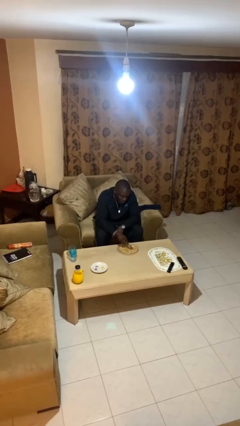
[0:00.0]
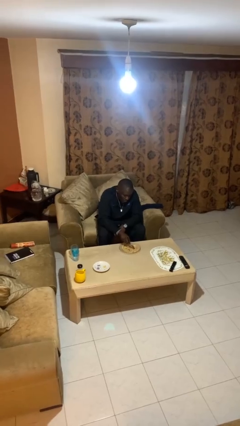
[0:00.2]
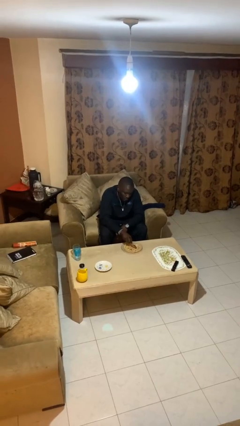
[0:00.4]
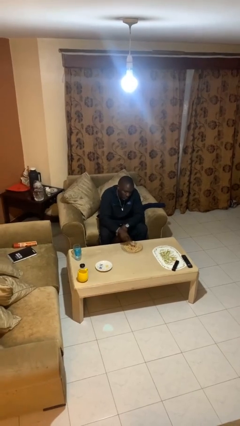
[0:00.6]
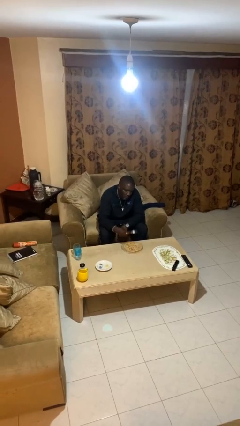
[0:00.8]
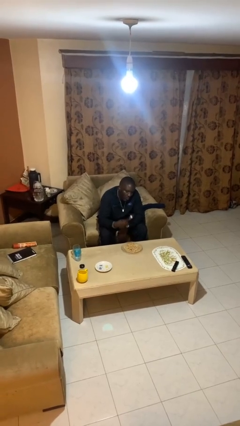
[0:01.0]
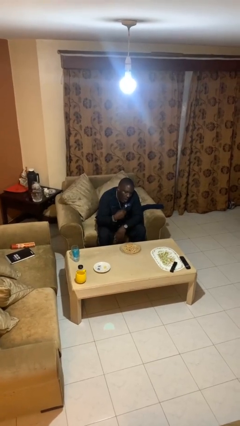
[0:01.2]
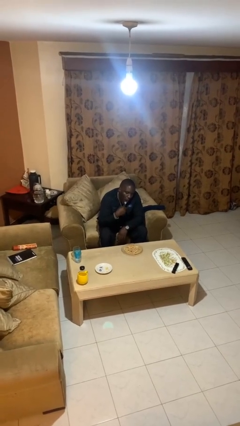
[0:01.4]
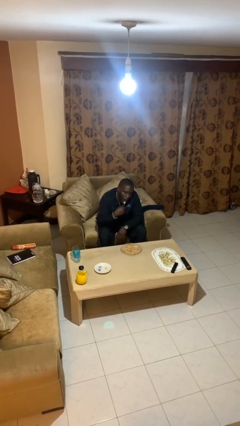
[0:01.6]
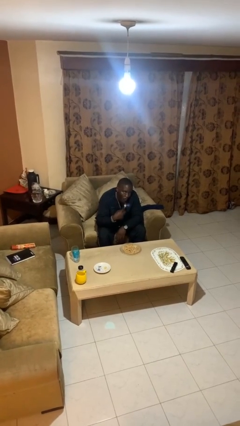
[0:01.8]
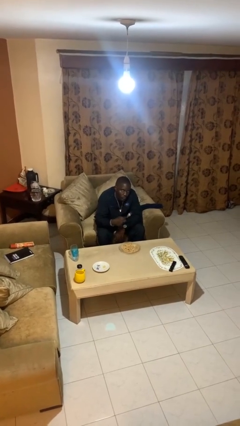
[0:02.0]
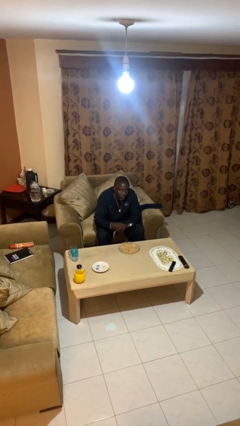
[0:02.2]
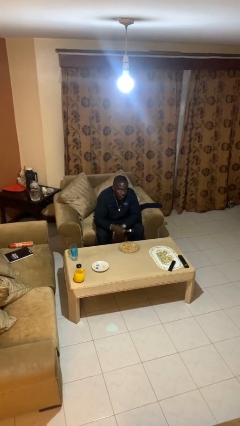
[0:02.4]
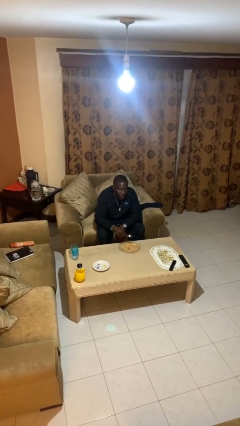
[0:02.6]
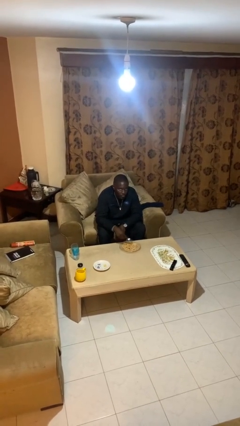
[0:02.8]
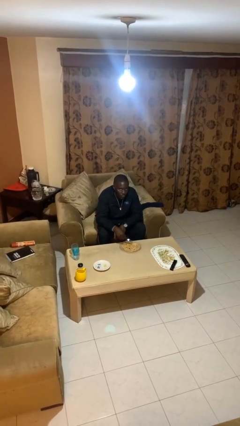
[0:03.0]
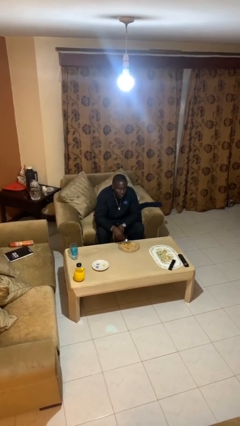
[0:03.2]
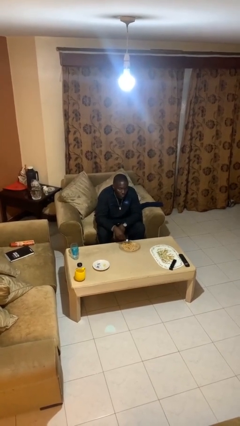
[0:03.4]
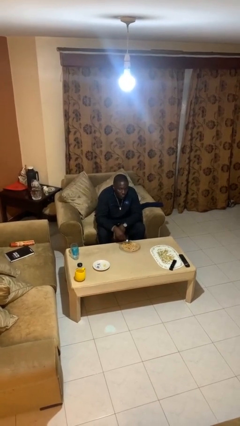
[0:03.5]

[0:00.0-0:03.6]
person eats with utensil

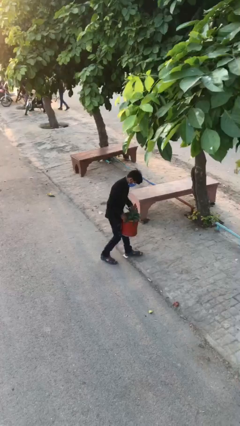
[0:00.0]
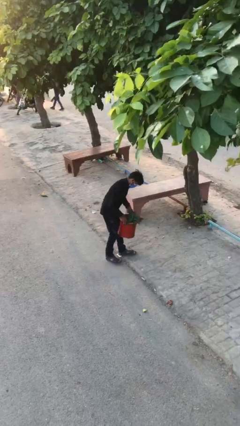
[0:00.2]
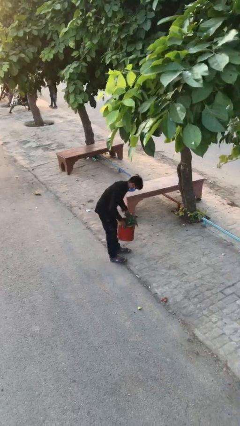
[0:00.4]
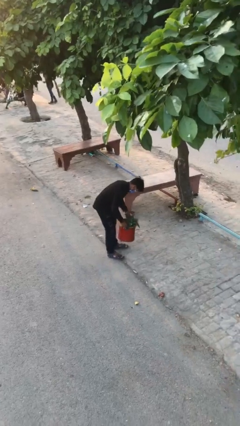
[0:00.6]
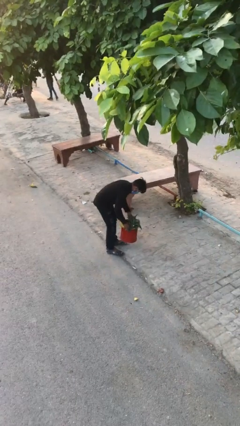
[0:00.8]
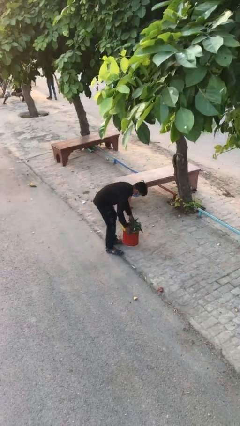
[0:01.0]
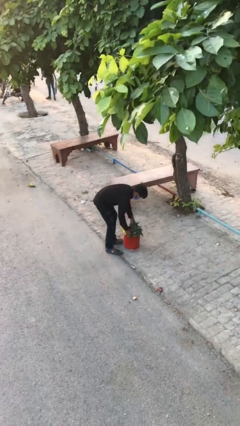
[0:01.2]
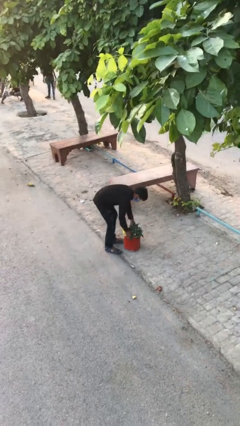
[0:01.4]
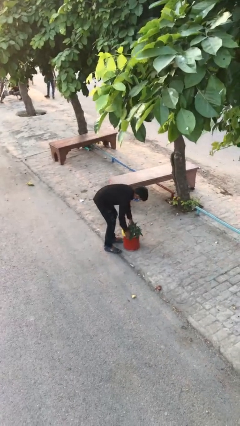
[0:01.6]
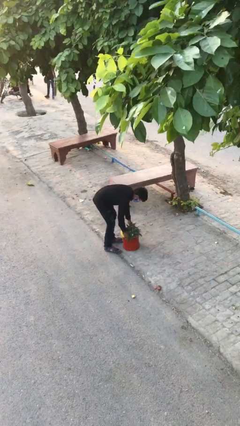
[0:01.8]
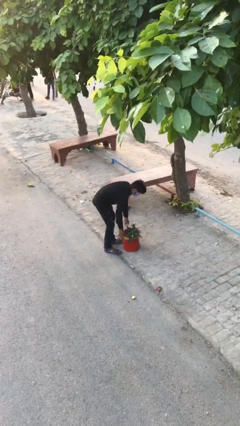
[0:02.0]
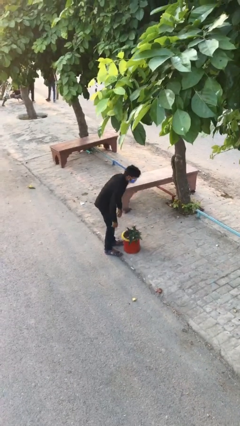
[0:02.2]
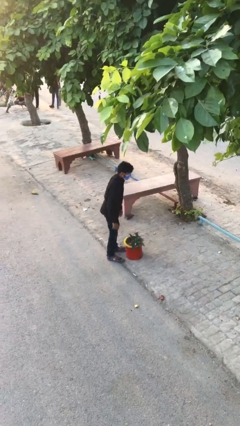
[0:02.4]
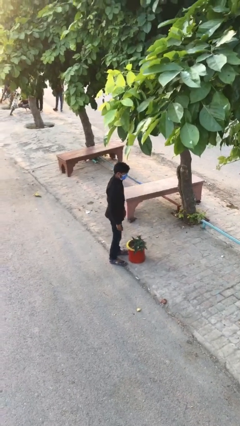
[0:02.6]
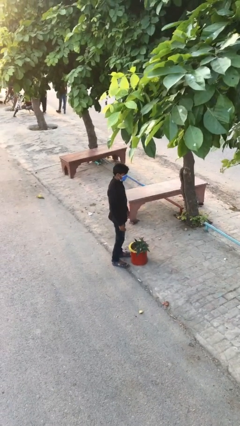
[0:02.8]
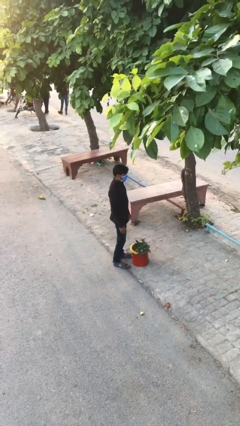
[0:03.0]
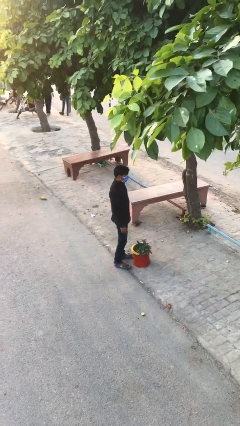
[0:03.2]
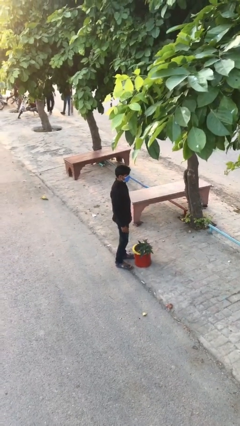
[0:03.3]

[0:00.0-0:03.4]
person puts down object on floor

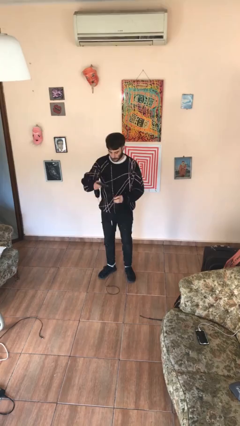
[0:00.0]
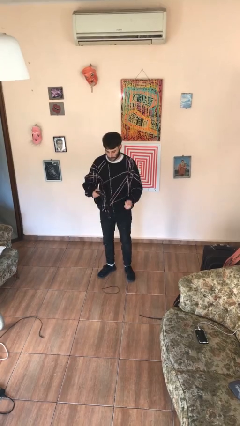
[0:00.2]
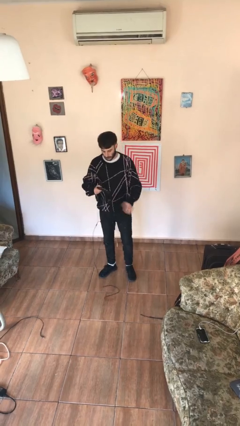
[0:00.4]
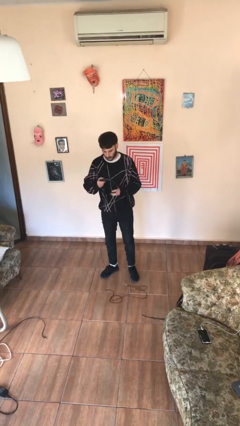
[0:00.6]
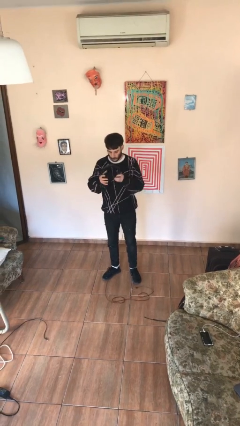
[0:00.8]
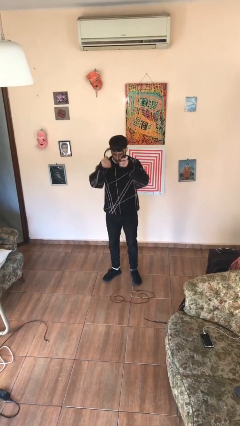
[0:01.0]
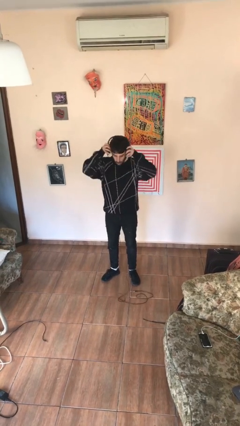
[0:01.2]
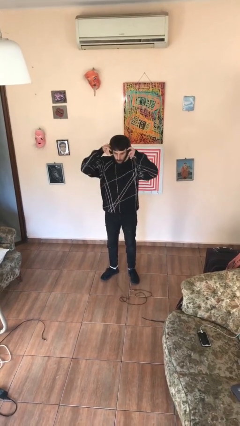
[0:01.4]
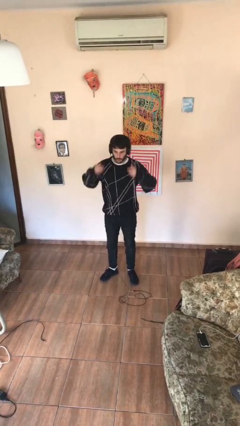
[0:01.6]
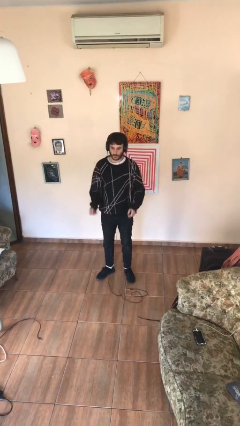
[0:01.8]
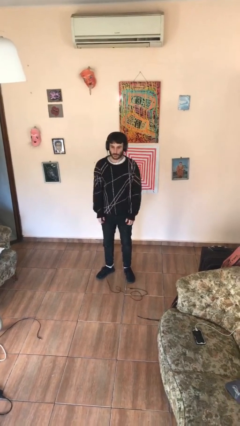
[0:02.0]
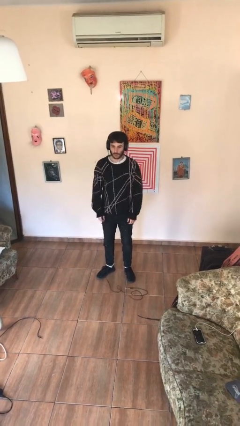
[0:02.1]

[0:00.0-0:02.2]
person puts on headphones

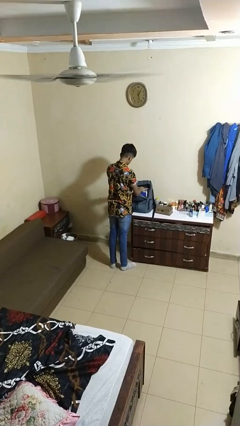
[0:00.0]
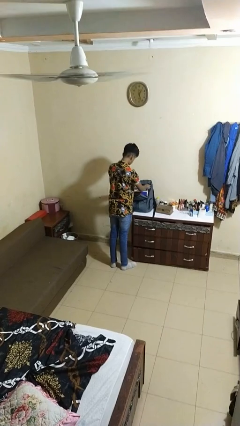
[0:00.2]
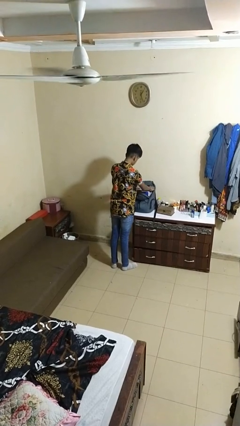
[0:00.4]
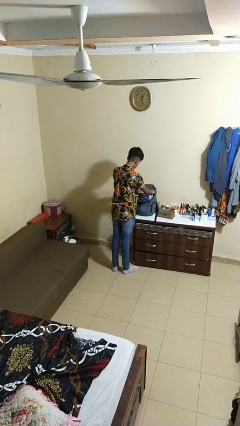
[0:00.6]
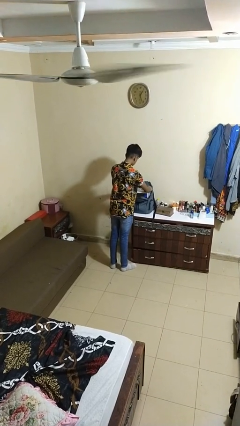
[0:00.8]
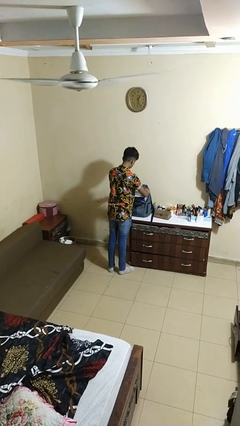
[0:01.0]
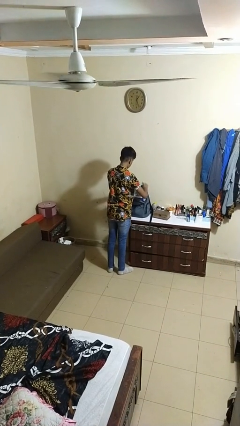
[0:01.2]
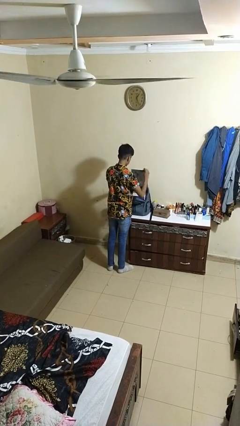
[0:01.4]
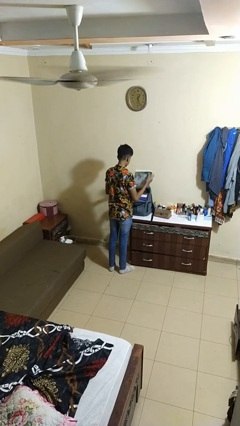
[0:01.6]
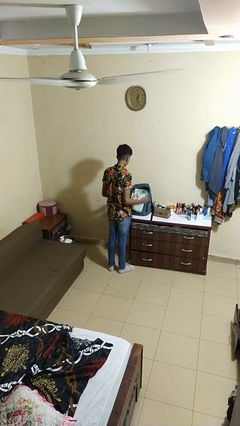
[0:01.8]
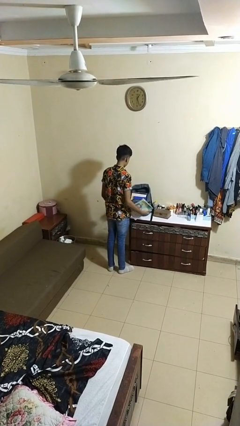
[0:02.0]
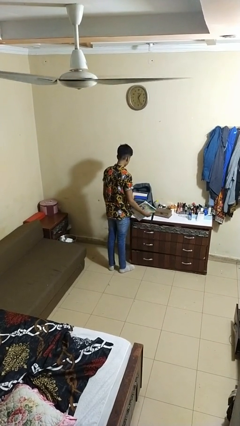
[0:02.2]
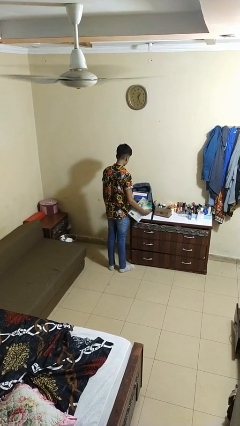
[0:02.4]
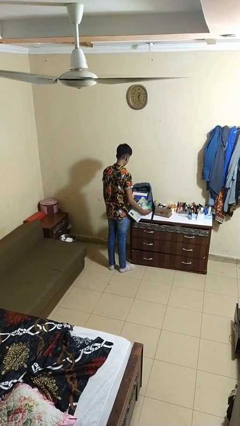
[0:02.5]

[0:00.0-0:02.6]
person takes object from backpack

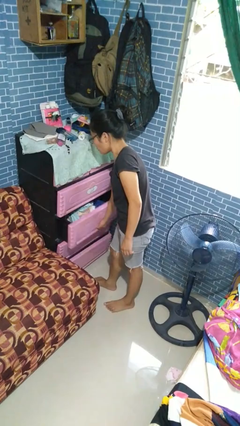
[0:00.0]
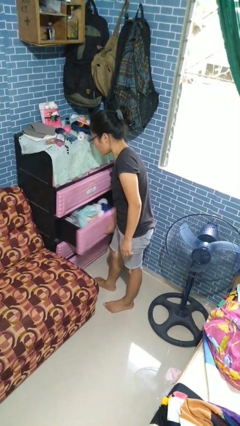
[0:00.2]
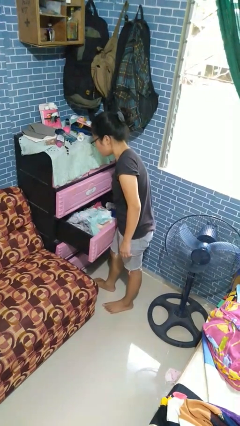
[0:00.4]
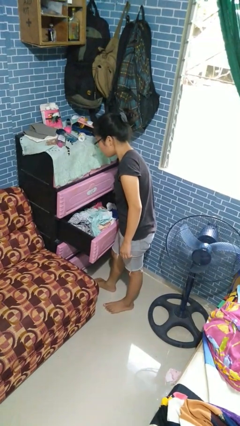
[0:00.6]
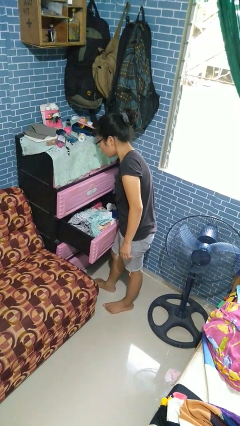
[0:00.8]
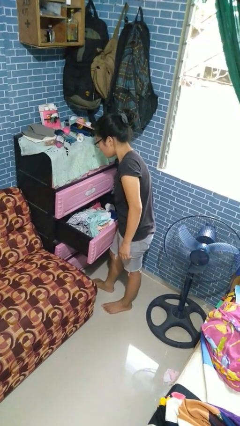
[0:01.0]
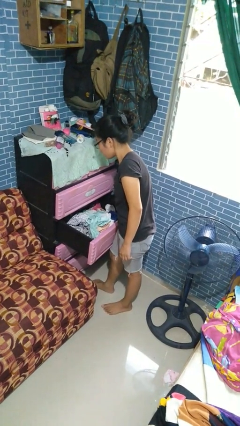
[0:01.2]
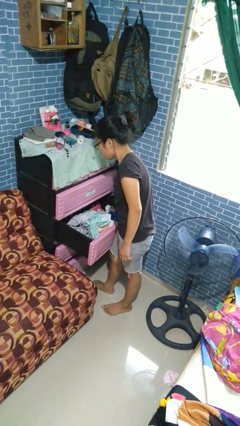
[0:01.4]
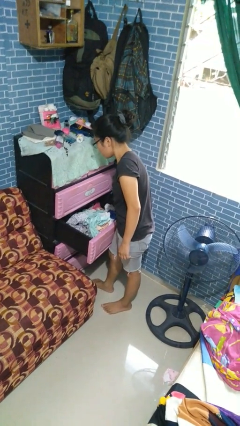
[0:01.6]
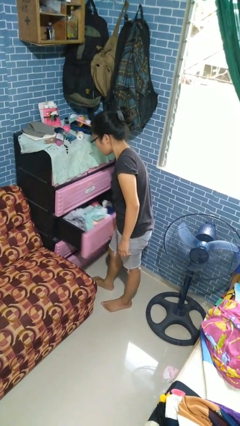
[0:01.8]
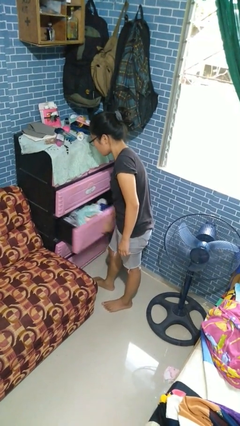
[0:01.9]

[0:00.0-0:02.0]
person opens dresser drawer

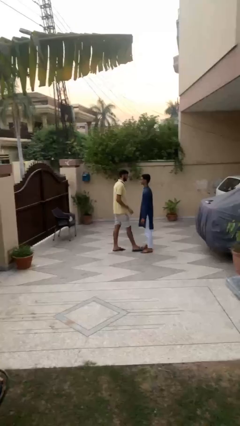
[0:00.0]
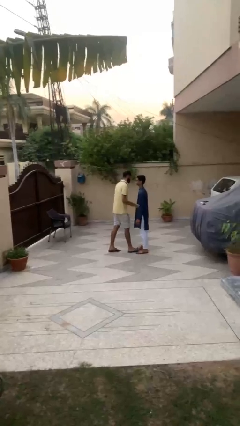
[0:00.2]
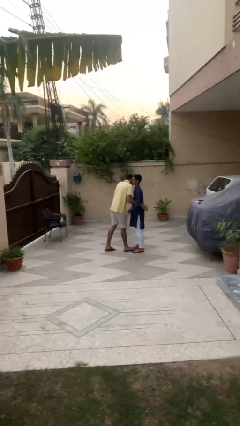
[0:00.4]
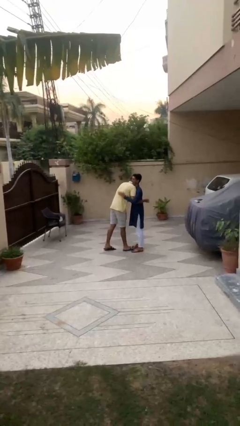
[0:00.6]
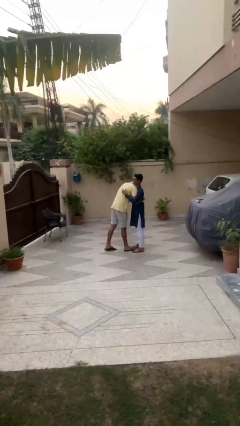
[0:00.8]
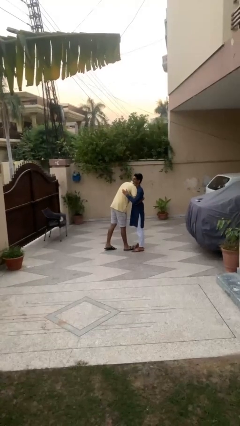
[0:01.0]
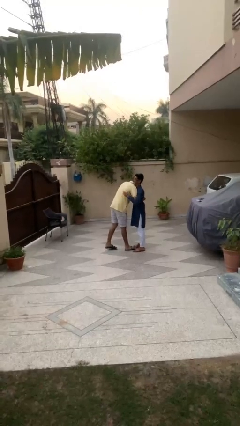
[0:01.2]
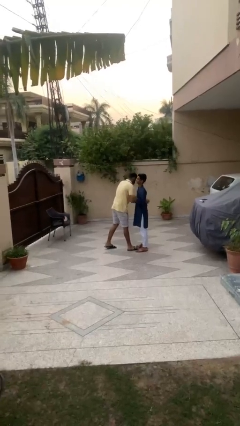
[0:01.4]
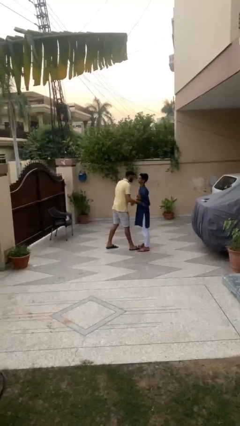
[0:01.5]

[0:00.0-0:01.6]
person embraces person

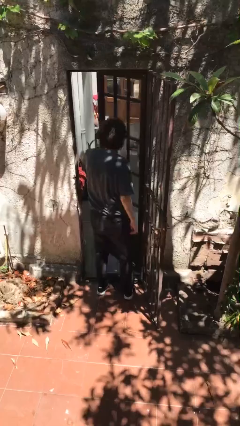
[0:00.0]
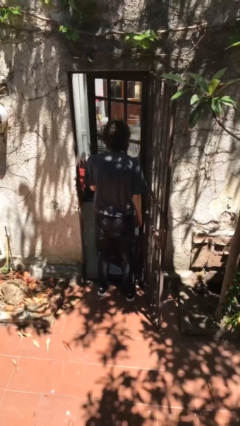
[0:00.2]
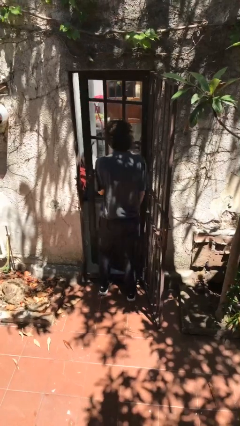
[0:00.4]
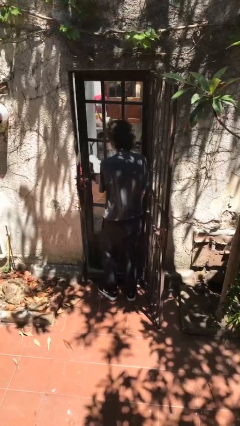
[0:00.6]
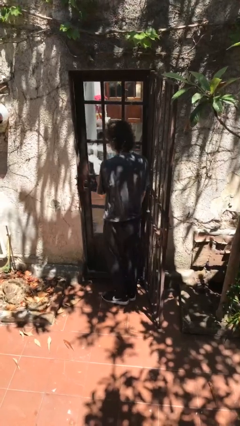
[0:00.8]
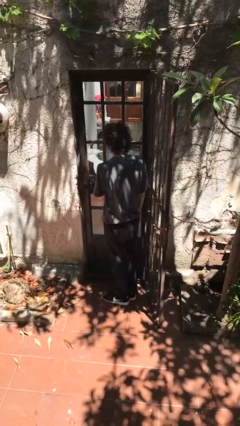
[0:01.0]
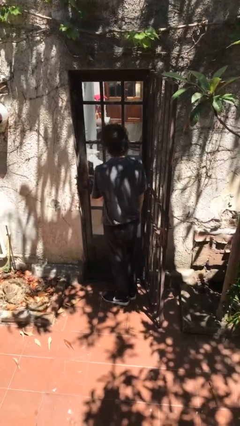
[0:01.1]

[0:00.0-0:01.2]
person closes facility door

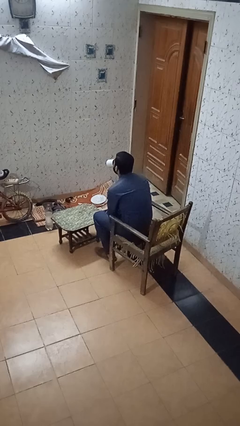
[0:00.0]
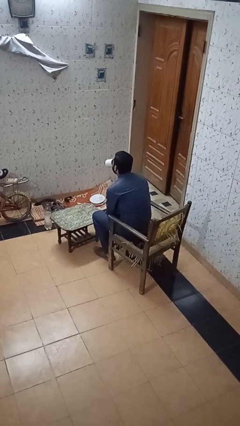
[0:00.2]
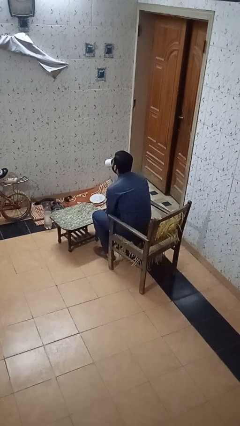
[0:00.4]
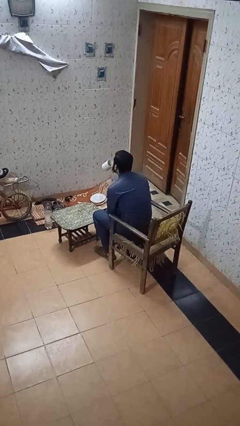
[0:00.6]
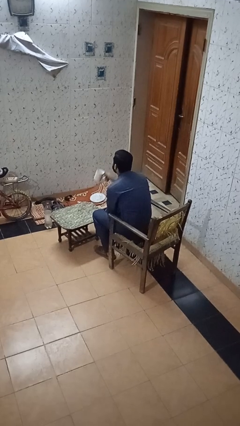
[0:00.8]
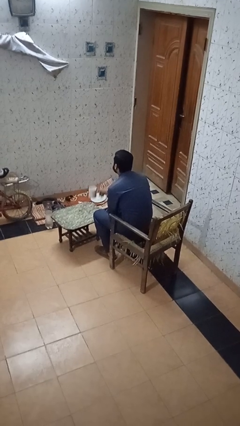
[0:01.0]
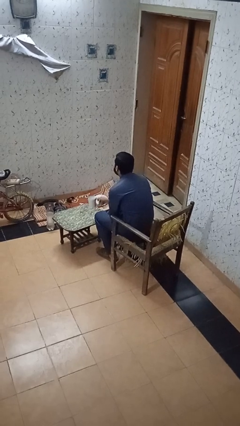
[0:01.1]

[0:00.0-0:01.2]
person puts down object on table
